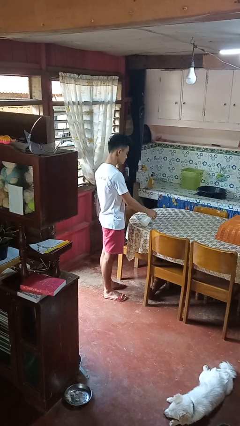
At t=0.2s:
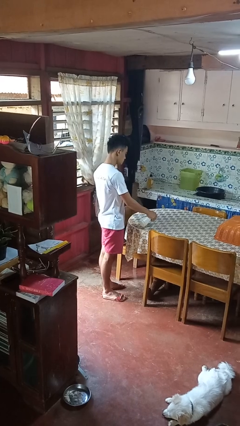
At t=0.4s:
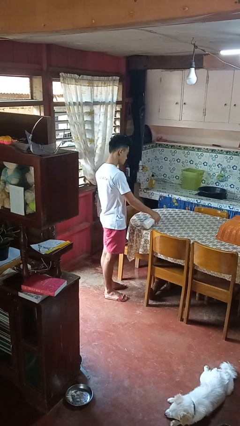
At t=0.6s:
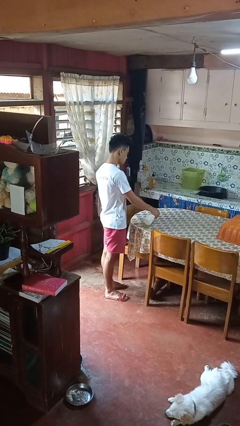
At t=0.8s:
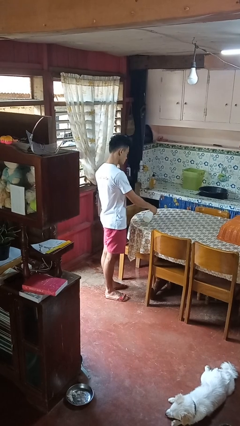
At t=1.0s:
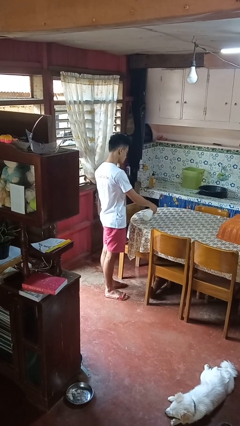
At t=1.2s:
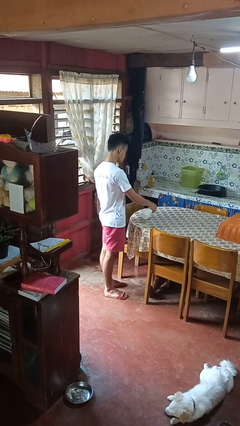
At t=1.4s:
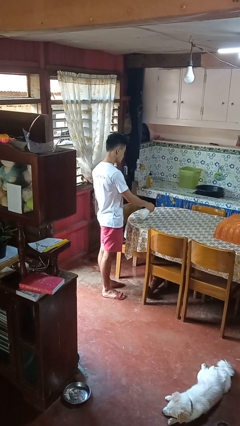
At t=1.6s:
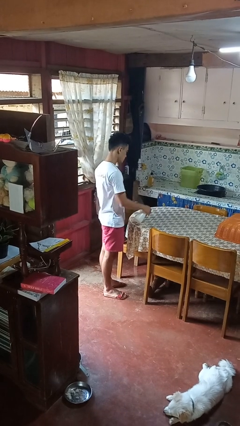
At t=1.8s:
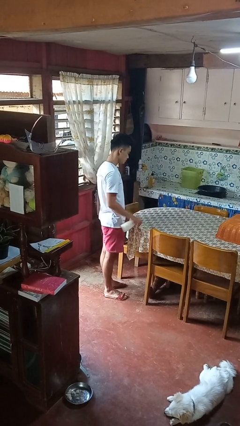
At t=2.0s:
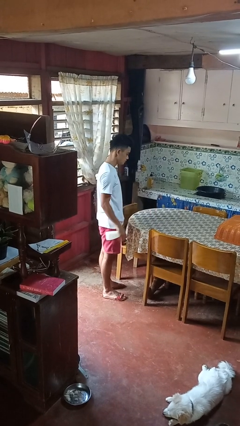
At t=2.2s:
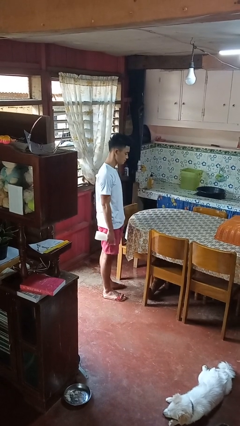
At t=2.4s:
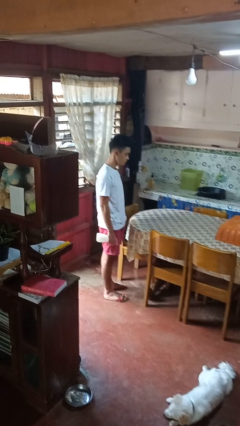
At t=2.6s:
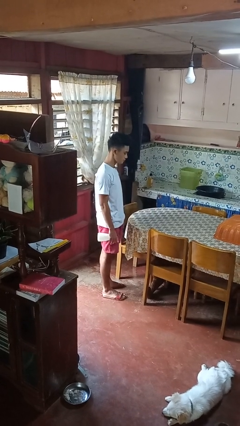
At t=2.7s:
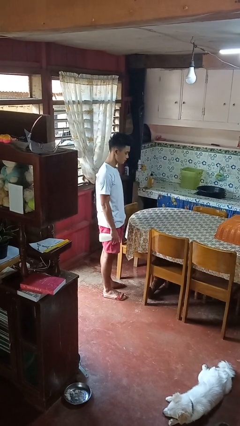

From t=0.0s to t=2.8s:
person sprays from bottle

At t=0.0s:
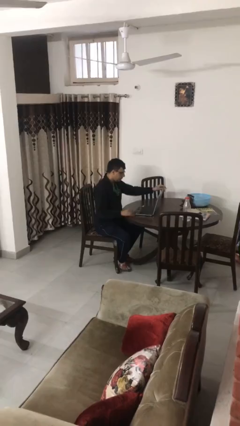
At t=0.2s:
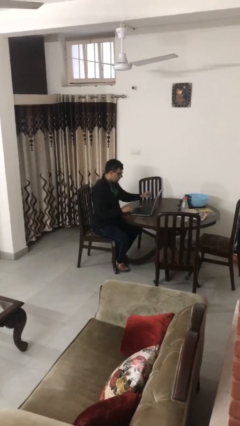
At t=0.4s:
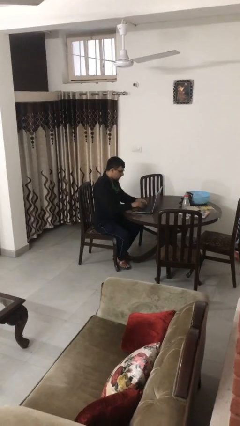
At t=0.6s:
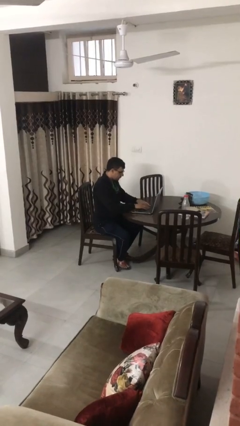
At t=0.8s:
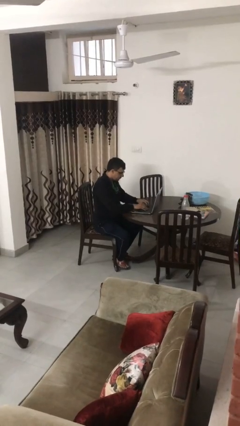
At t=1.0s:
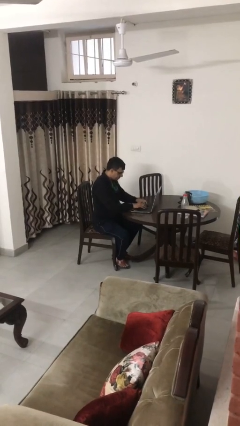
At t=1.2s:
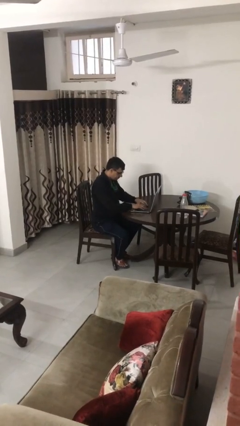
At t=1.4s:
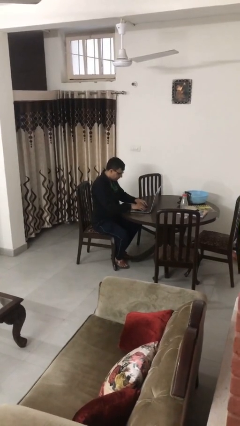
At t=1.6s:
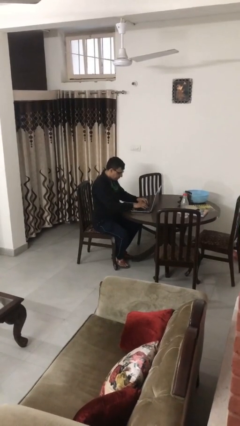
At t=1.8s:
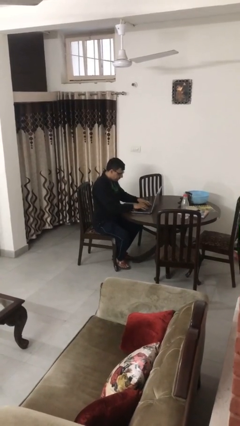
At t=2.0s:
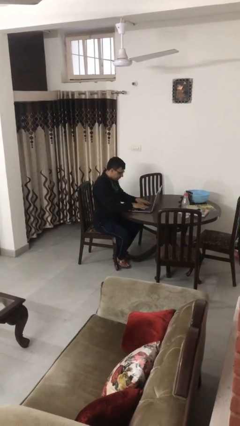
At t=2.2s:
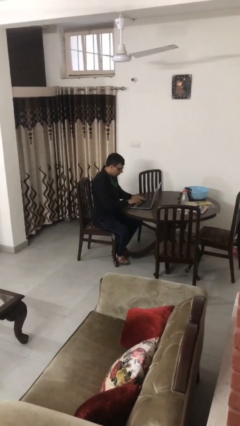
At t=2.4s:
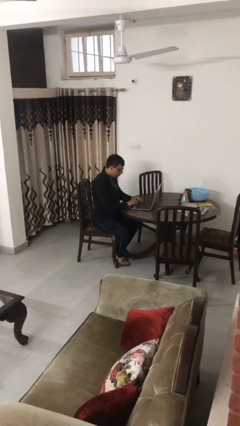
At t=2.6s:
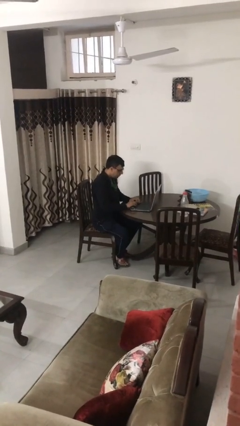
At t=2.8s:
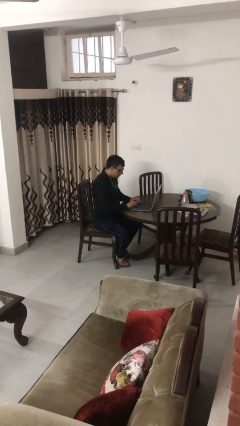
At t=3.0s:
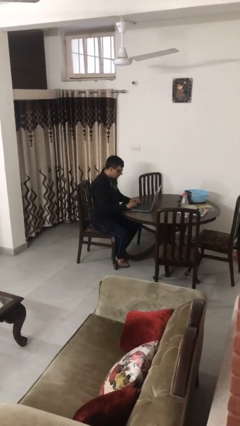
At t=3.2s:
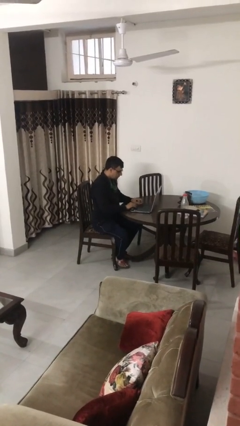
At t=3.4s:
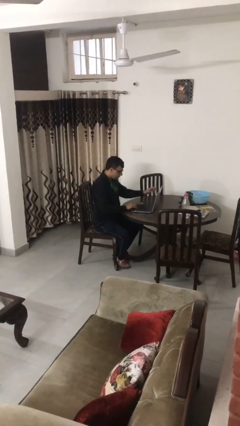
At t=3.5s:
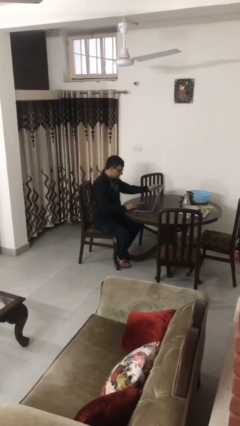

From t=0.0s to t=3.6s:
person interacts with laptop

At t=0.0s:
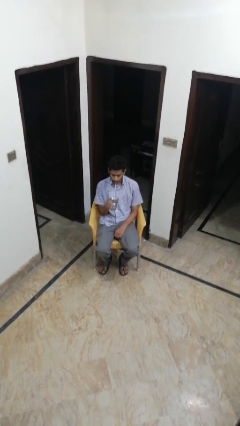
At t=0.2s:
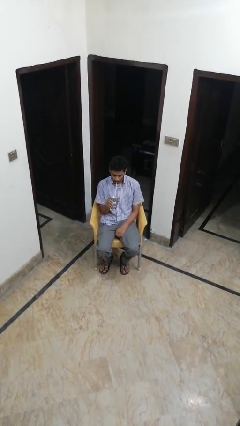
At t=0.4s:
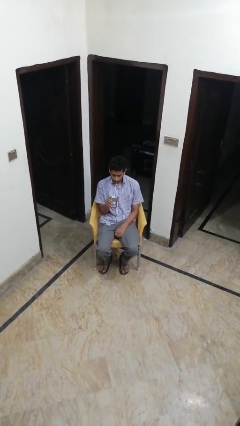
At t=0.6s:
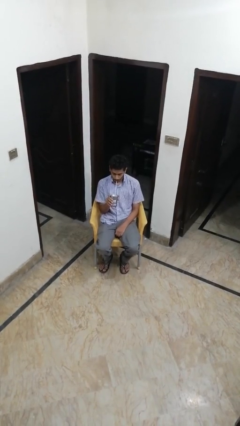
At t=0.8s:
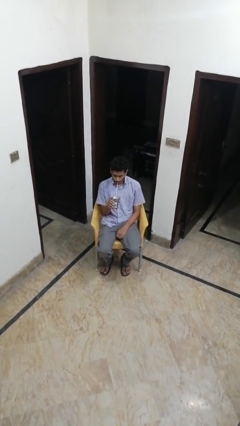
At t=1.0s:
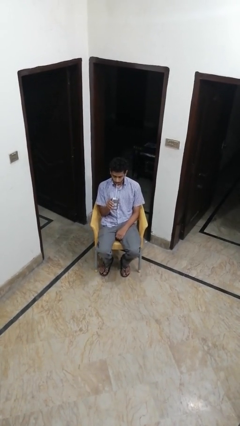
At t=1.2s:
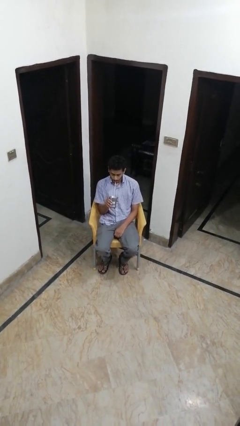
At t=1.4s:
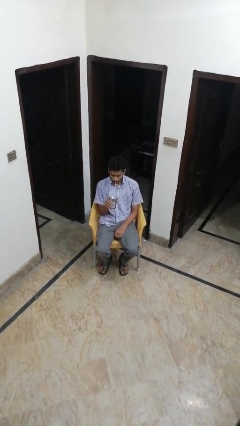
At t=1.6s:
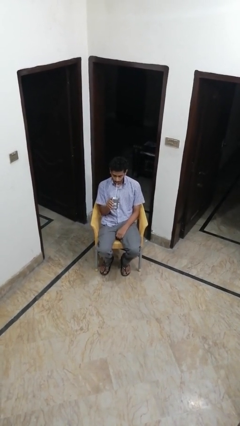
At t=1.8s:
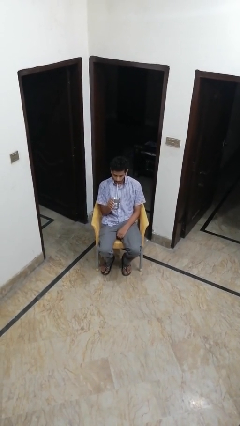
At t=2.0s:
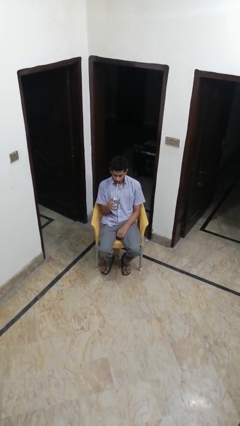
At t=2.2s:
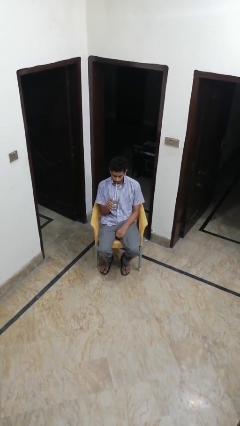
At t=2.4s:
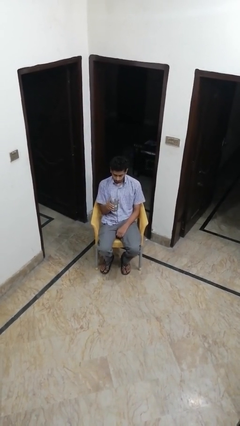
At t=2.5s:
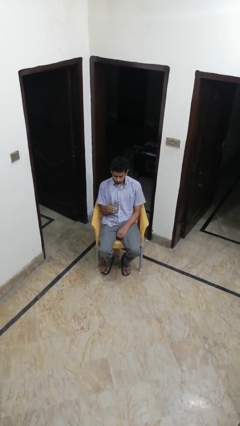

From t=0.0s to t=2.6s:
person drinks from straw

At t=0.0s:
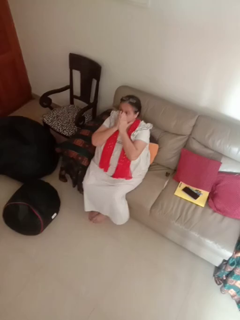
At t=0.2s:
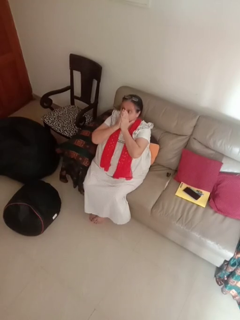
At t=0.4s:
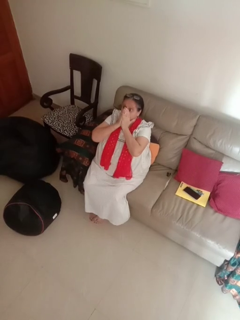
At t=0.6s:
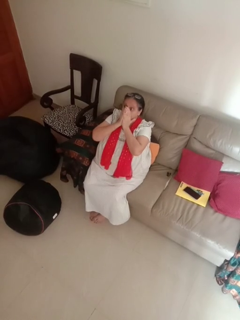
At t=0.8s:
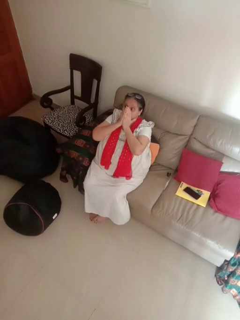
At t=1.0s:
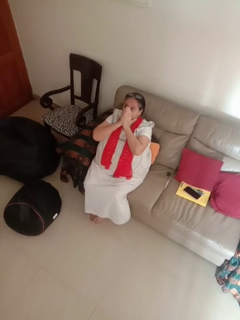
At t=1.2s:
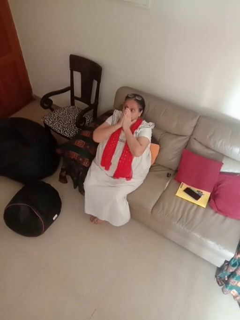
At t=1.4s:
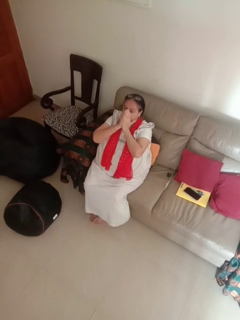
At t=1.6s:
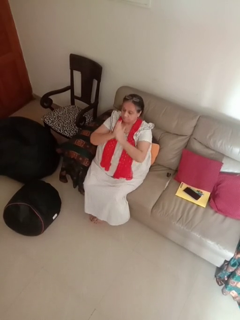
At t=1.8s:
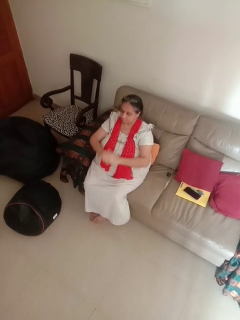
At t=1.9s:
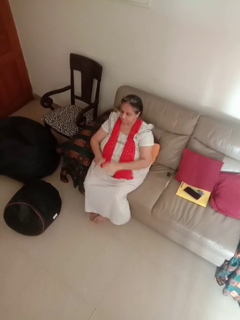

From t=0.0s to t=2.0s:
person covers face with hands

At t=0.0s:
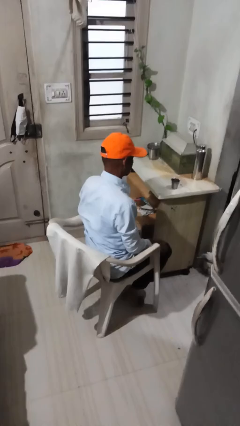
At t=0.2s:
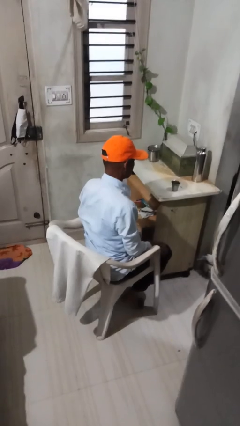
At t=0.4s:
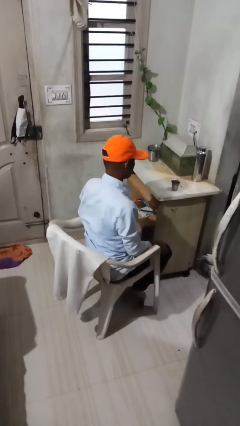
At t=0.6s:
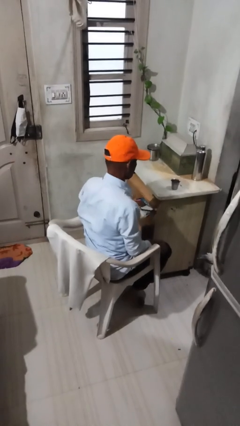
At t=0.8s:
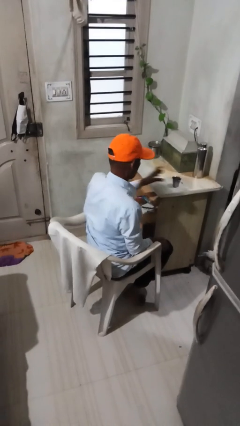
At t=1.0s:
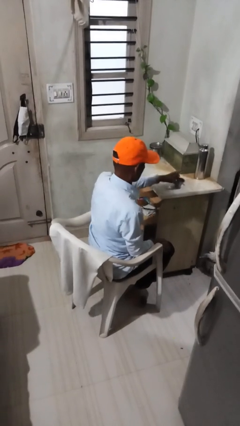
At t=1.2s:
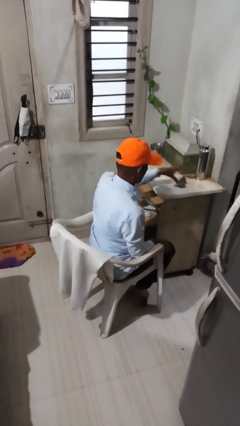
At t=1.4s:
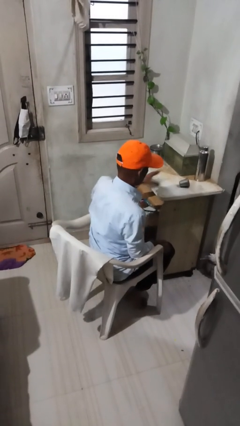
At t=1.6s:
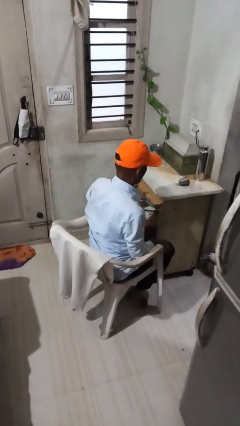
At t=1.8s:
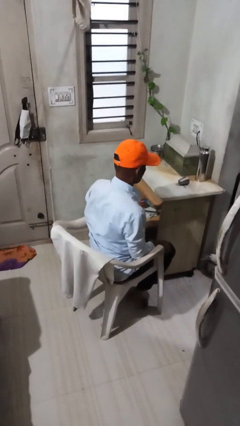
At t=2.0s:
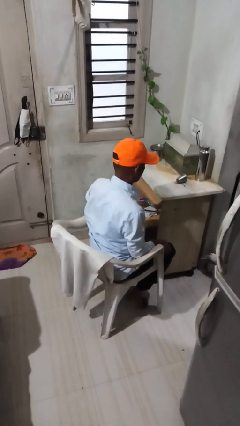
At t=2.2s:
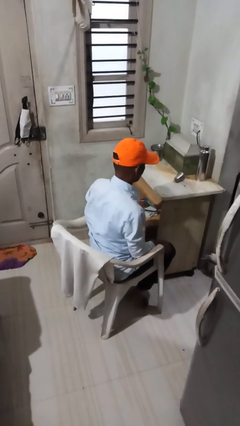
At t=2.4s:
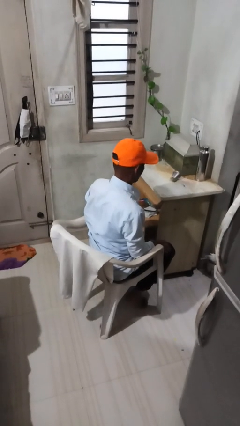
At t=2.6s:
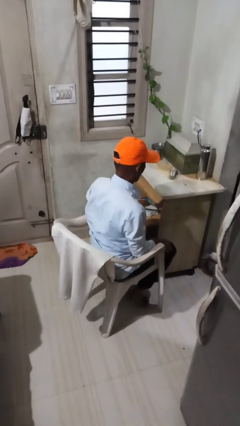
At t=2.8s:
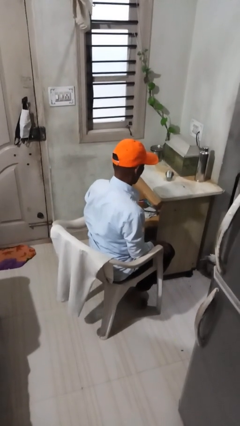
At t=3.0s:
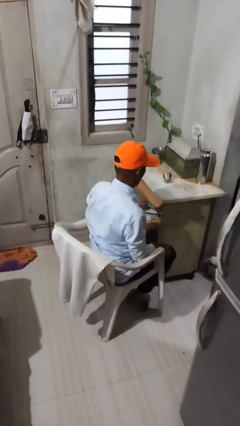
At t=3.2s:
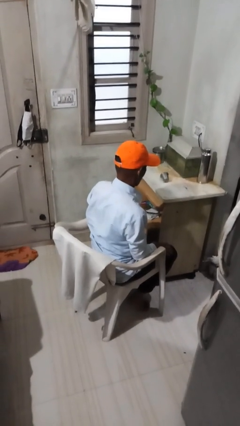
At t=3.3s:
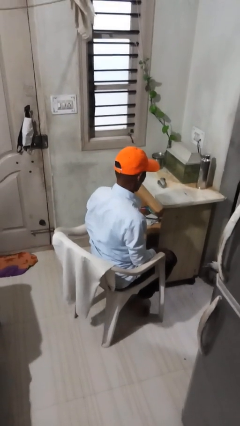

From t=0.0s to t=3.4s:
person knocks over glass

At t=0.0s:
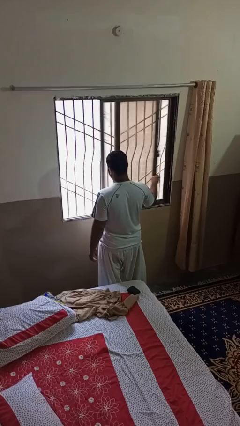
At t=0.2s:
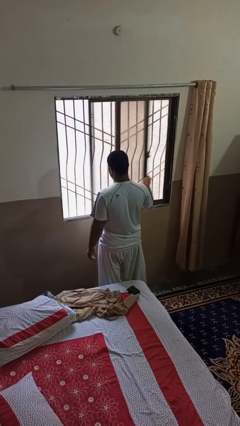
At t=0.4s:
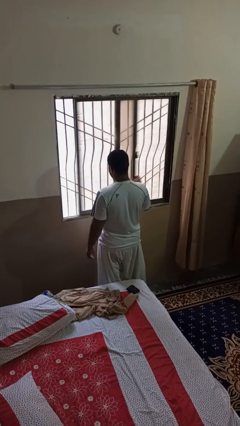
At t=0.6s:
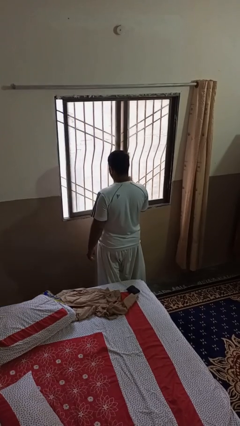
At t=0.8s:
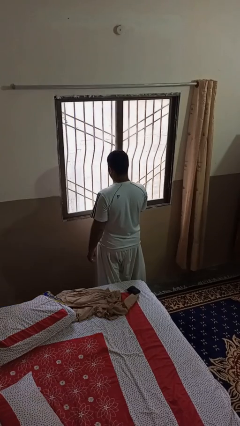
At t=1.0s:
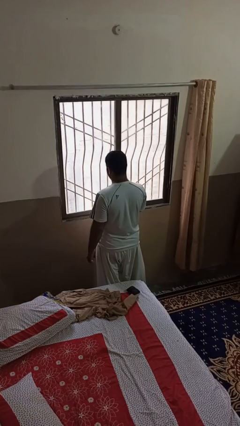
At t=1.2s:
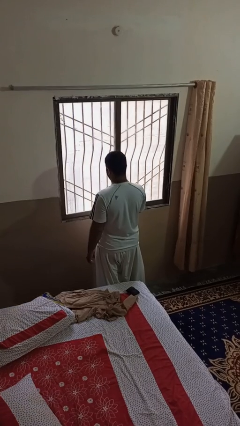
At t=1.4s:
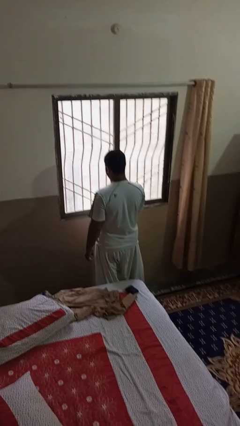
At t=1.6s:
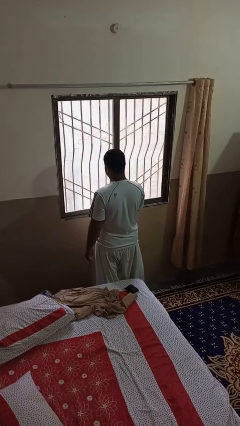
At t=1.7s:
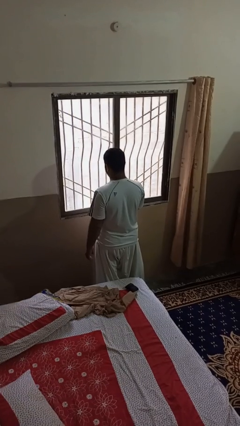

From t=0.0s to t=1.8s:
person closes home window

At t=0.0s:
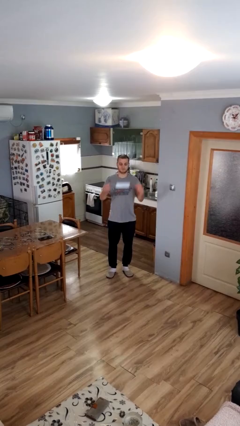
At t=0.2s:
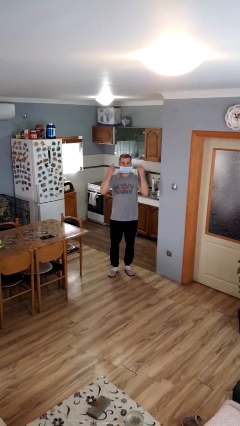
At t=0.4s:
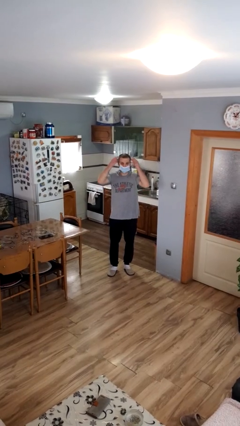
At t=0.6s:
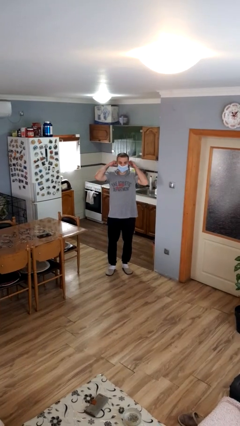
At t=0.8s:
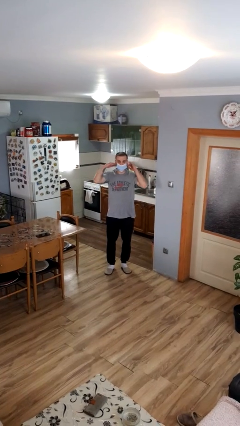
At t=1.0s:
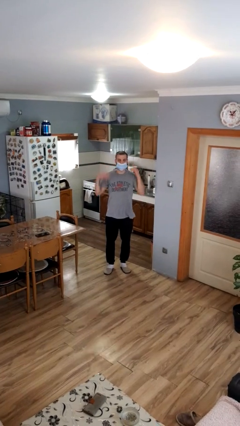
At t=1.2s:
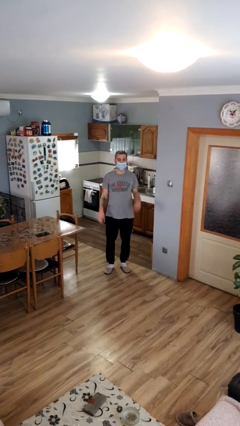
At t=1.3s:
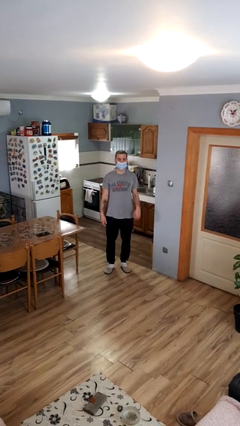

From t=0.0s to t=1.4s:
person puts on facemask
